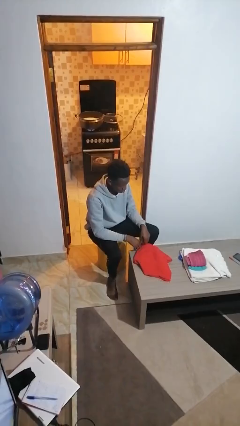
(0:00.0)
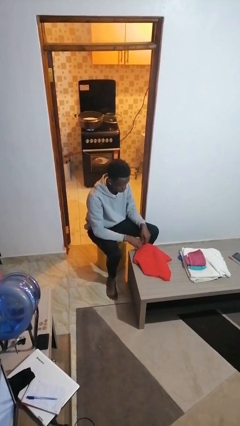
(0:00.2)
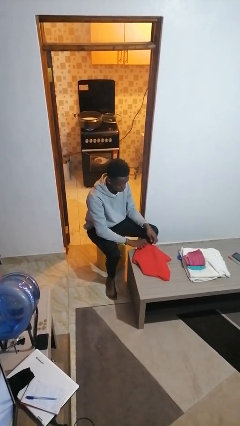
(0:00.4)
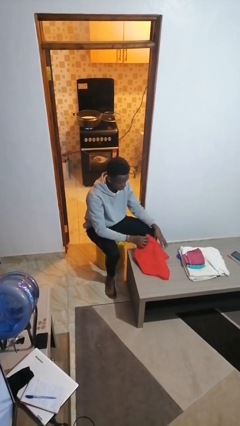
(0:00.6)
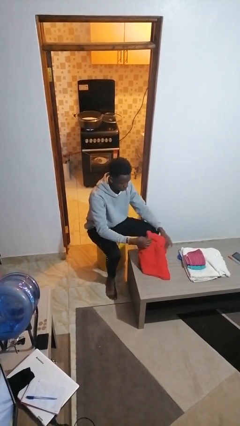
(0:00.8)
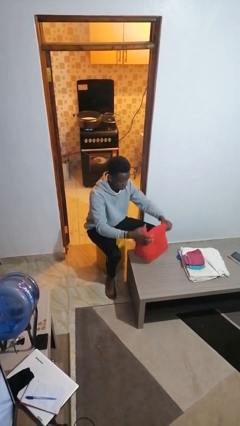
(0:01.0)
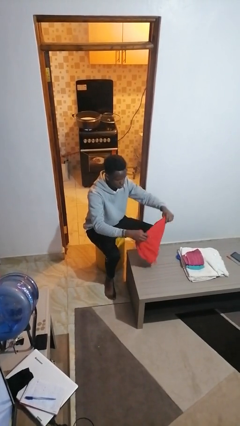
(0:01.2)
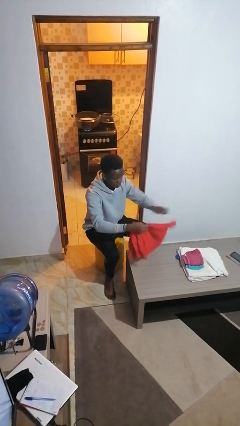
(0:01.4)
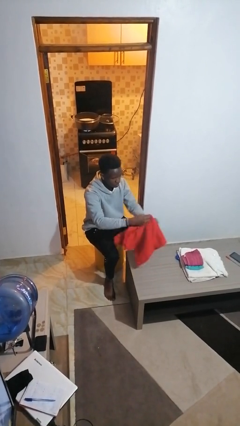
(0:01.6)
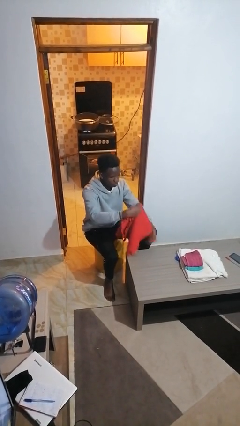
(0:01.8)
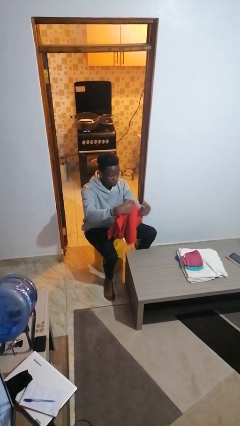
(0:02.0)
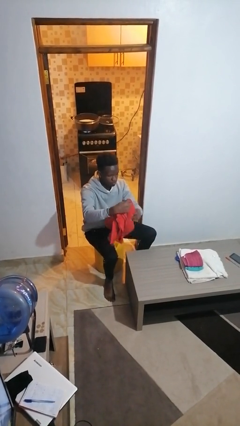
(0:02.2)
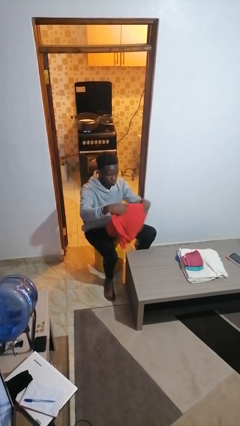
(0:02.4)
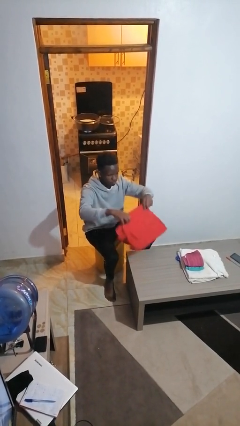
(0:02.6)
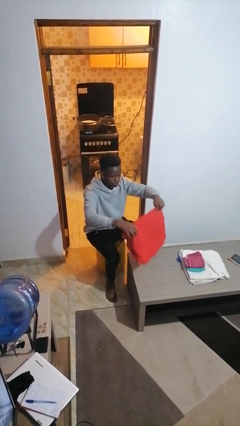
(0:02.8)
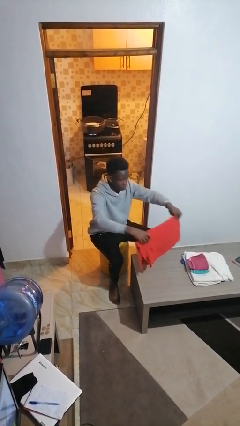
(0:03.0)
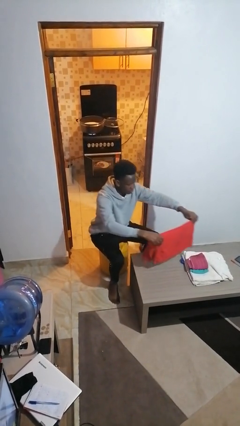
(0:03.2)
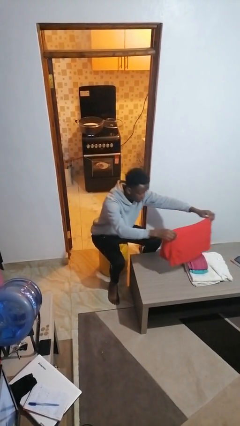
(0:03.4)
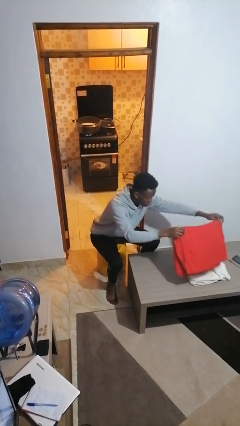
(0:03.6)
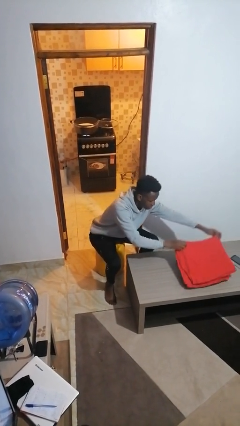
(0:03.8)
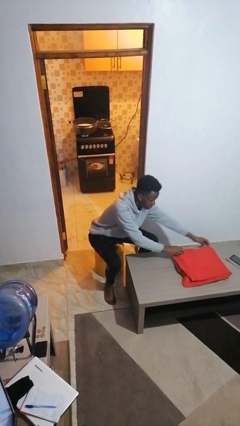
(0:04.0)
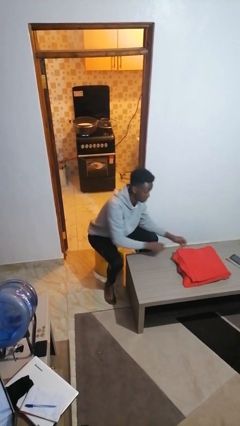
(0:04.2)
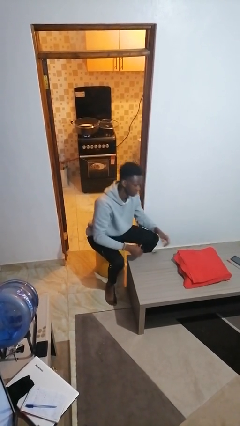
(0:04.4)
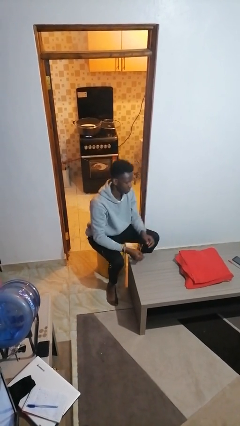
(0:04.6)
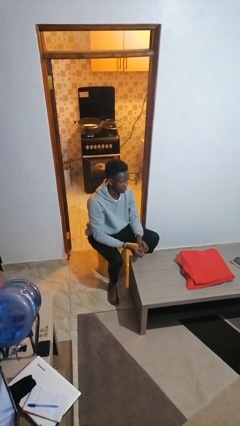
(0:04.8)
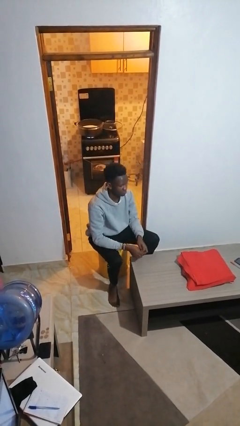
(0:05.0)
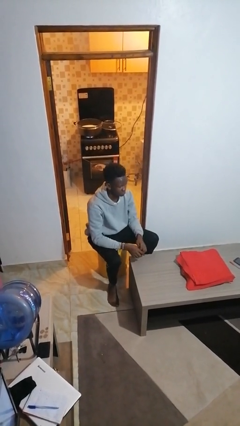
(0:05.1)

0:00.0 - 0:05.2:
person folds towel

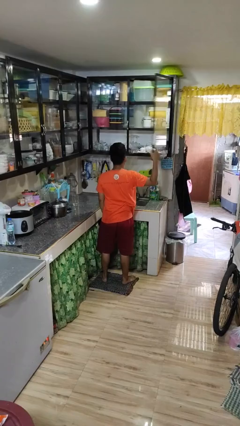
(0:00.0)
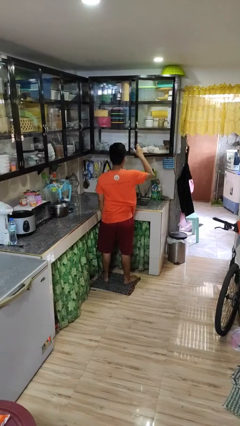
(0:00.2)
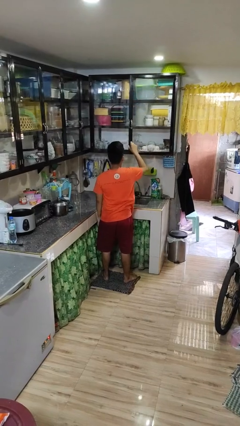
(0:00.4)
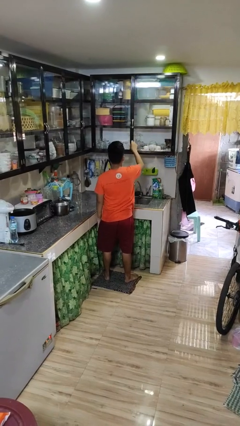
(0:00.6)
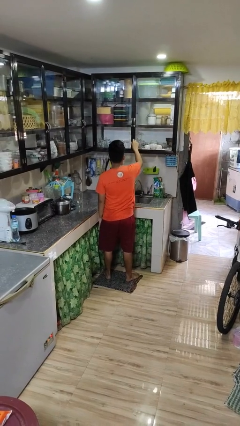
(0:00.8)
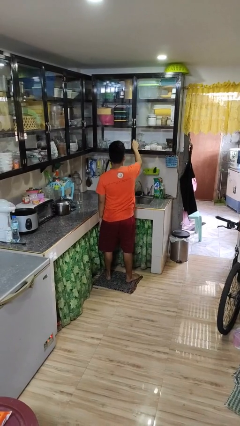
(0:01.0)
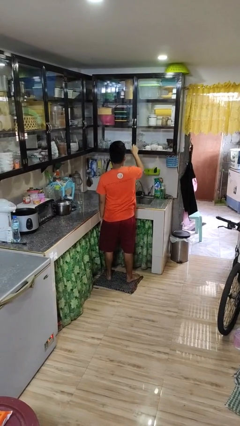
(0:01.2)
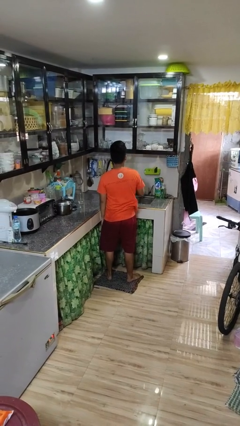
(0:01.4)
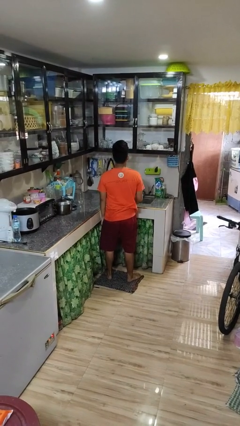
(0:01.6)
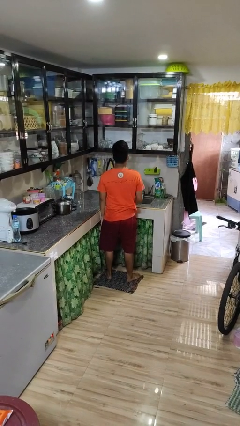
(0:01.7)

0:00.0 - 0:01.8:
person closes cabinet

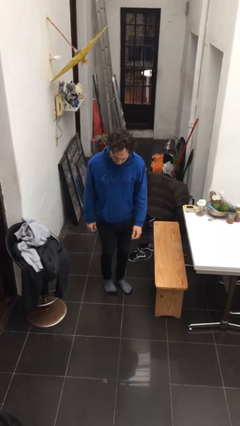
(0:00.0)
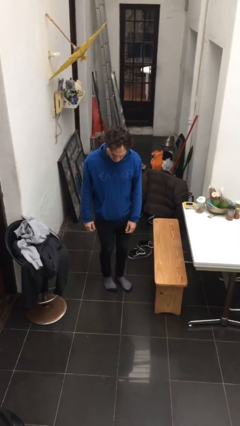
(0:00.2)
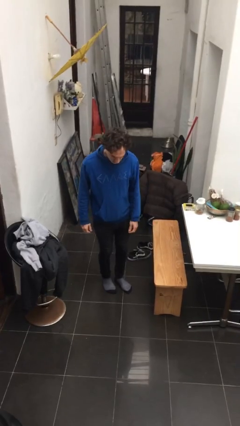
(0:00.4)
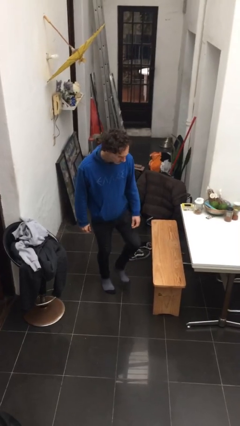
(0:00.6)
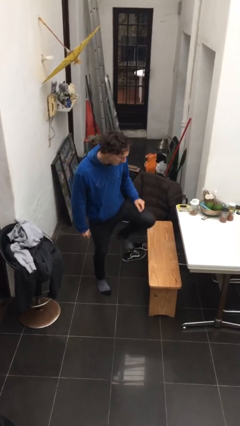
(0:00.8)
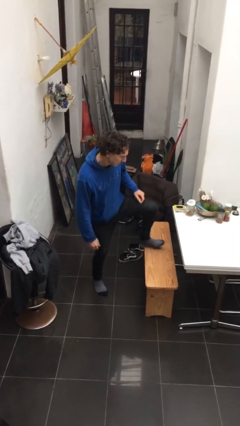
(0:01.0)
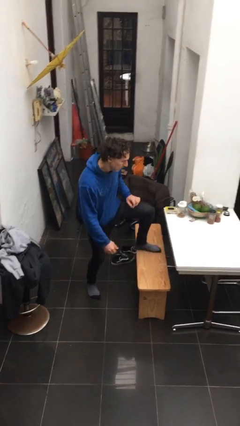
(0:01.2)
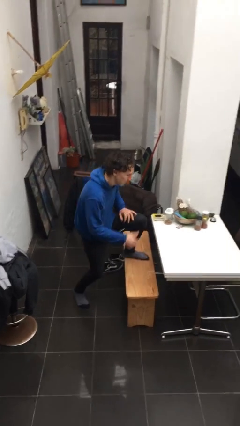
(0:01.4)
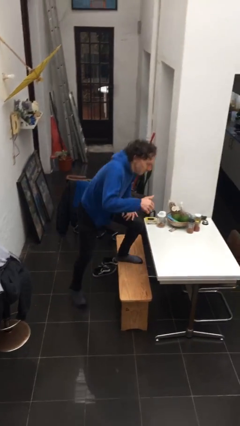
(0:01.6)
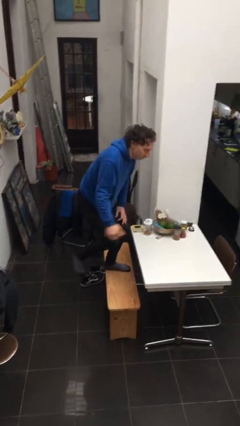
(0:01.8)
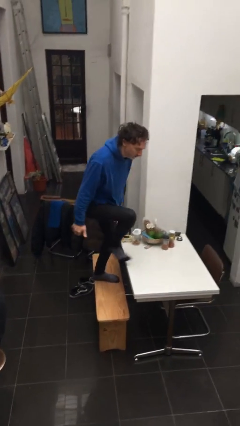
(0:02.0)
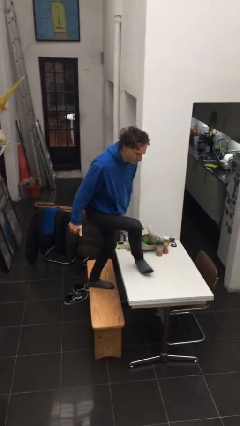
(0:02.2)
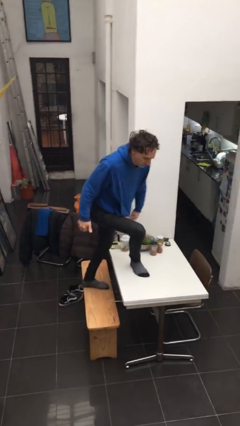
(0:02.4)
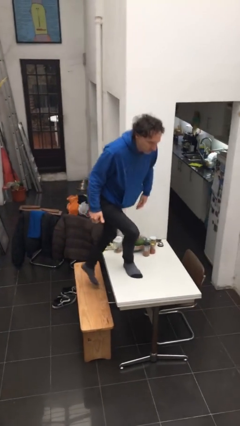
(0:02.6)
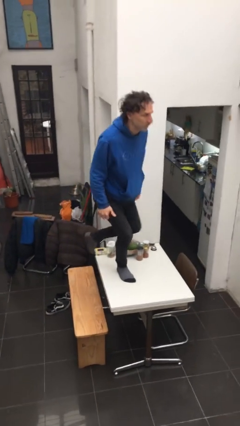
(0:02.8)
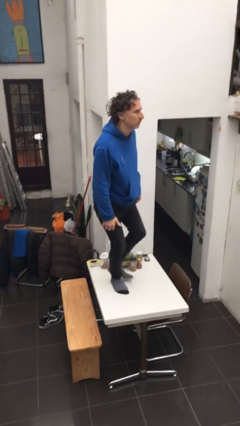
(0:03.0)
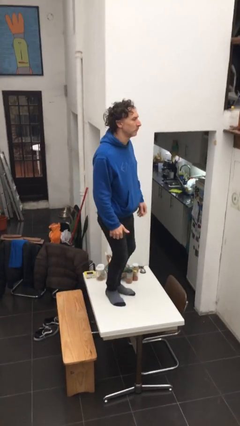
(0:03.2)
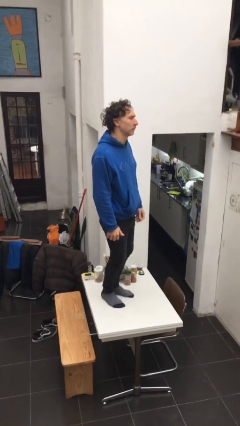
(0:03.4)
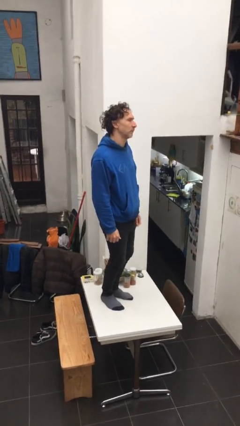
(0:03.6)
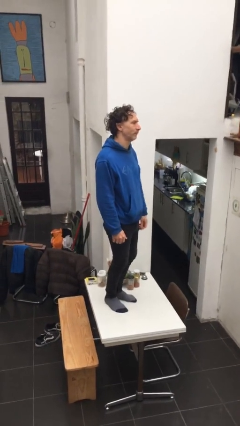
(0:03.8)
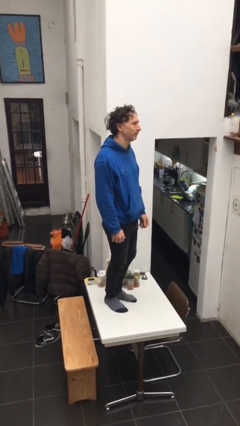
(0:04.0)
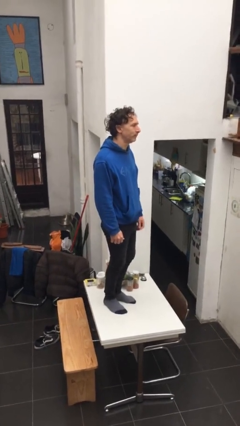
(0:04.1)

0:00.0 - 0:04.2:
person climbs on table

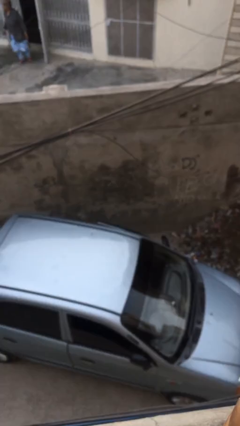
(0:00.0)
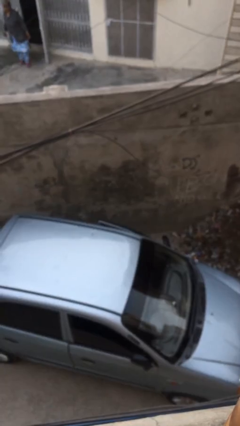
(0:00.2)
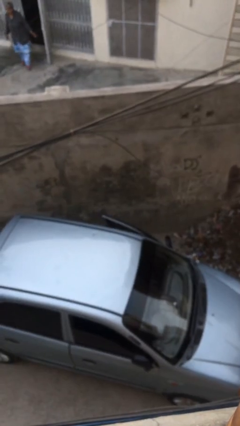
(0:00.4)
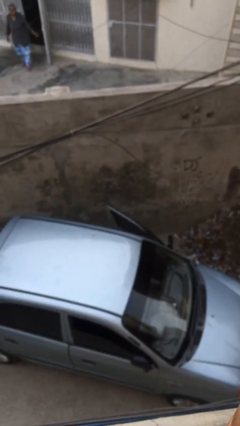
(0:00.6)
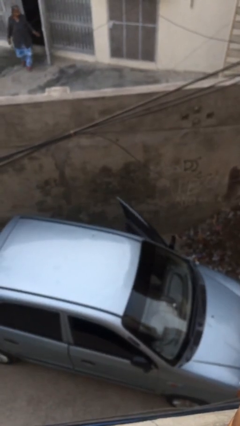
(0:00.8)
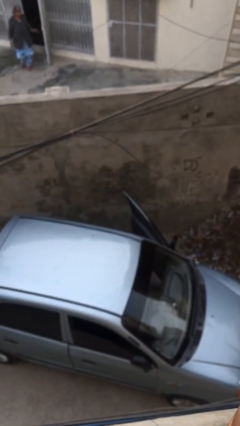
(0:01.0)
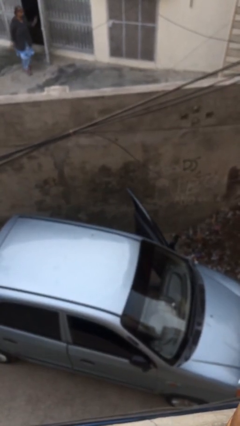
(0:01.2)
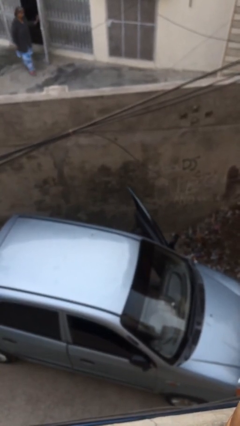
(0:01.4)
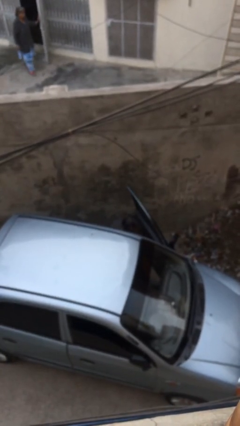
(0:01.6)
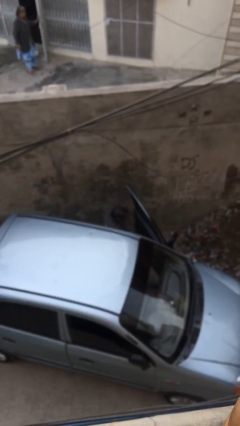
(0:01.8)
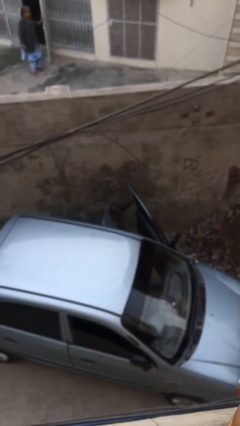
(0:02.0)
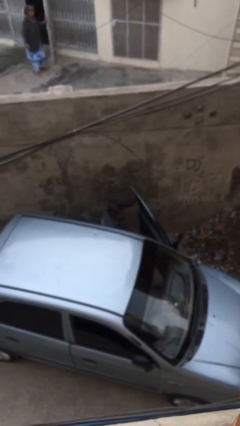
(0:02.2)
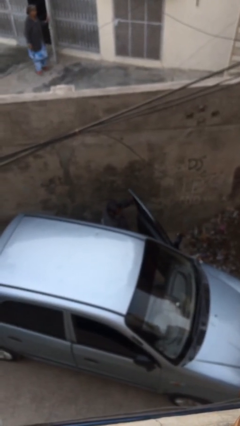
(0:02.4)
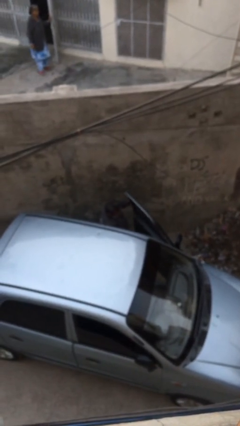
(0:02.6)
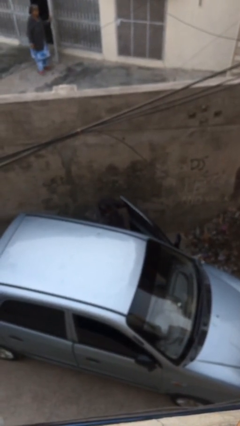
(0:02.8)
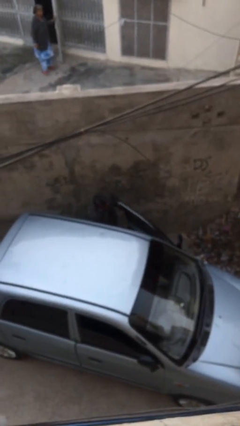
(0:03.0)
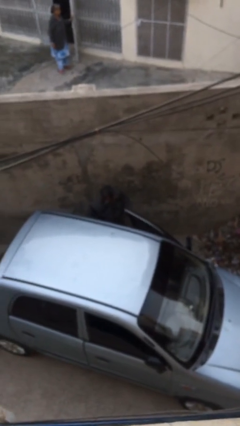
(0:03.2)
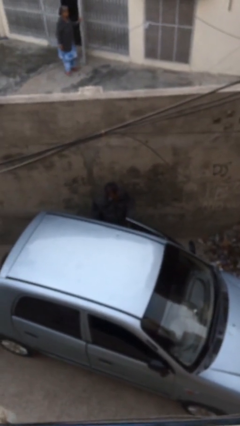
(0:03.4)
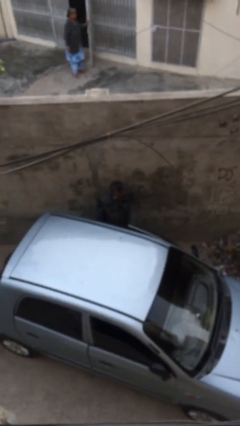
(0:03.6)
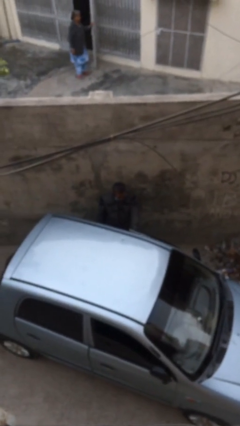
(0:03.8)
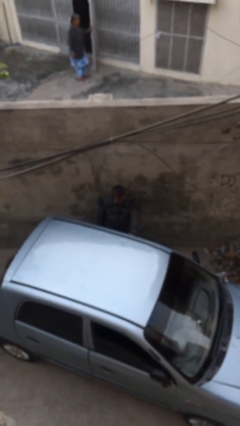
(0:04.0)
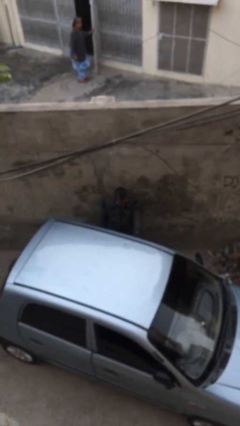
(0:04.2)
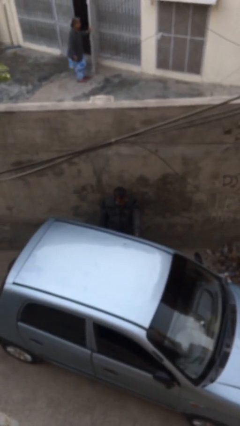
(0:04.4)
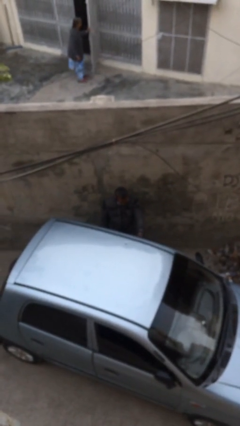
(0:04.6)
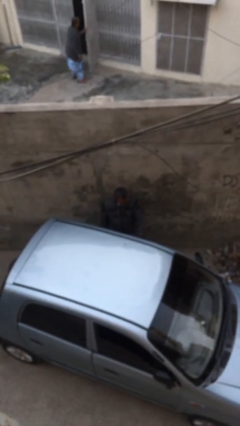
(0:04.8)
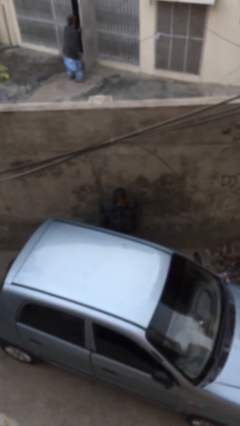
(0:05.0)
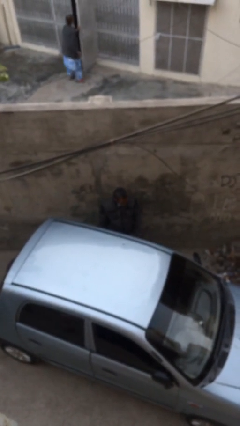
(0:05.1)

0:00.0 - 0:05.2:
car drops off person

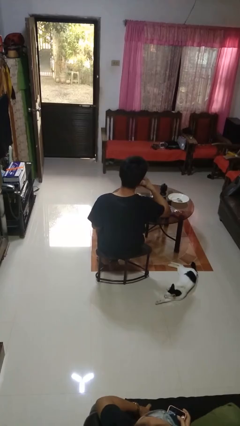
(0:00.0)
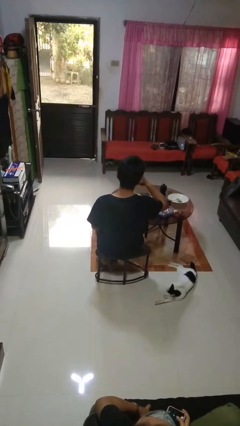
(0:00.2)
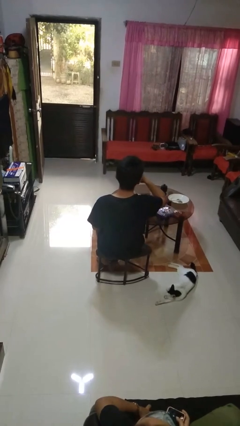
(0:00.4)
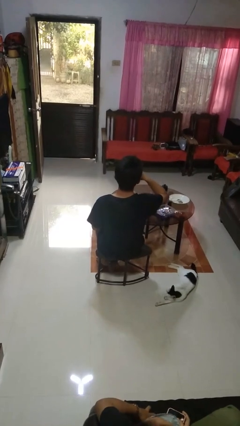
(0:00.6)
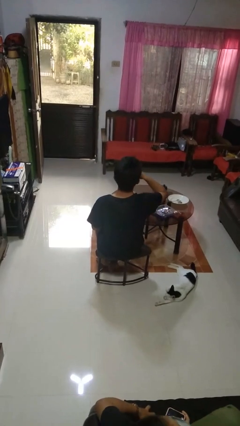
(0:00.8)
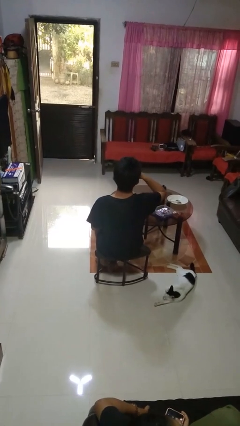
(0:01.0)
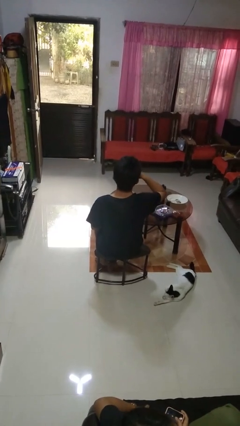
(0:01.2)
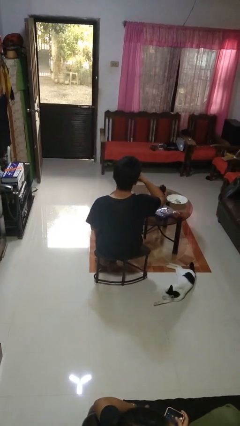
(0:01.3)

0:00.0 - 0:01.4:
person drinks from cup
